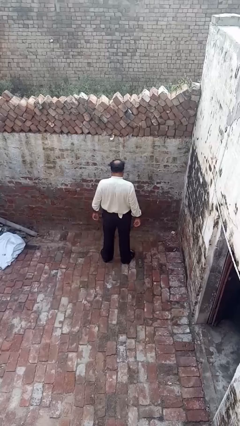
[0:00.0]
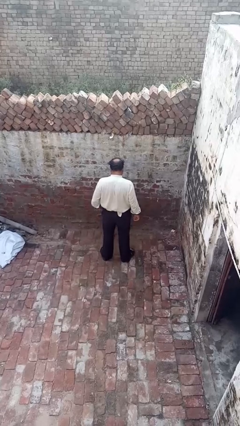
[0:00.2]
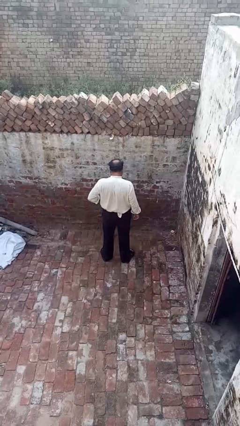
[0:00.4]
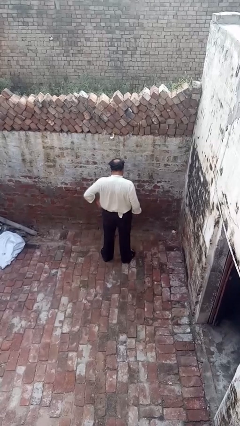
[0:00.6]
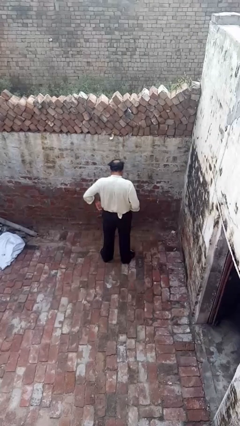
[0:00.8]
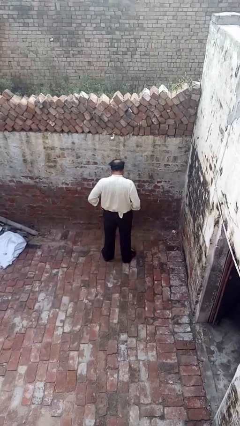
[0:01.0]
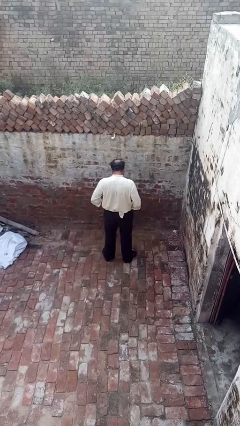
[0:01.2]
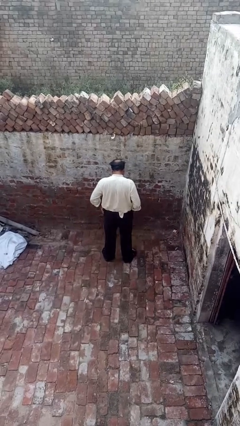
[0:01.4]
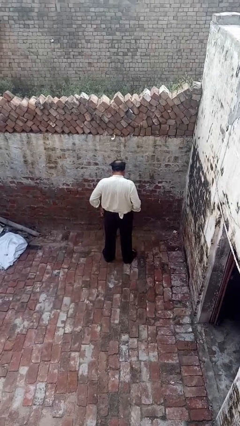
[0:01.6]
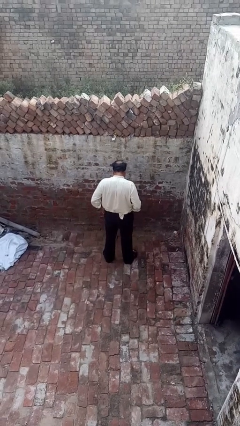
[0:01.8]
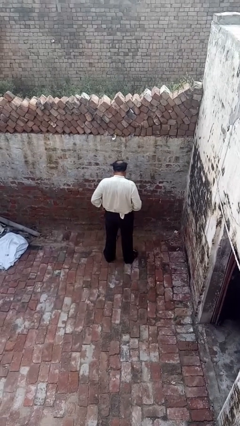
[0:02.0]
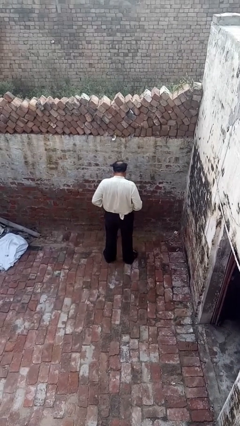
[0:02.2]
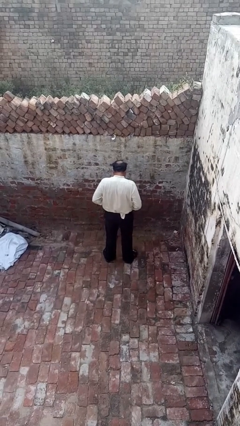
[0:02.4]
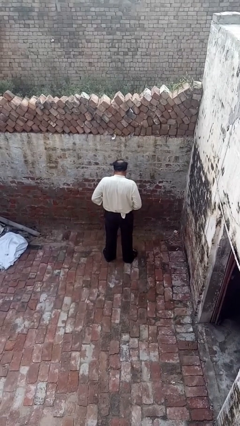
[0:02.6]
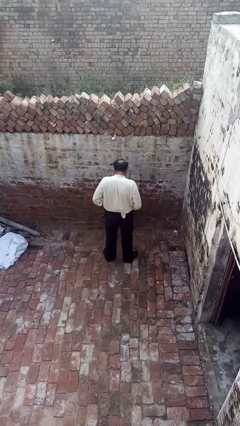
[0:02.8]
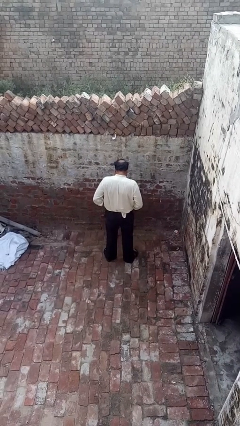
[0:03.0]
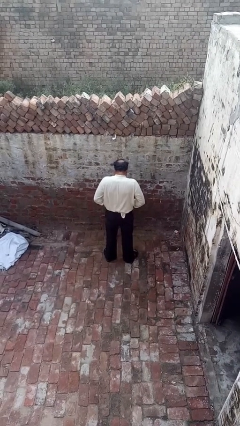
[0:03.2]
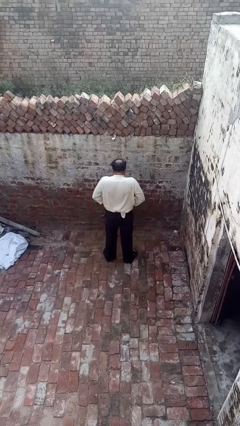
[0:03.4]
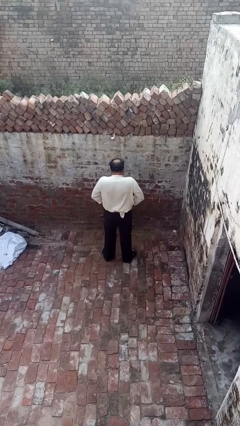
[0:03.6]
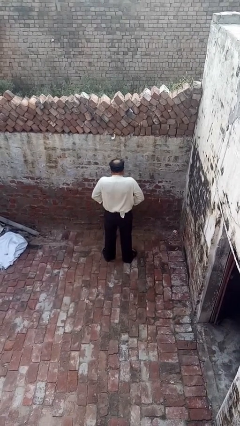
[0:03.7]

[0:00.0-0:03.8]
person hikes up pants

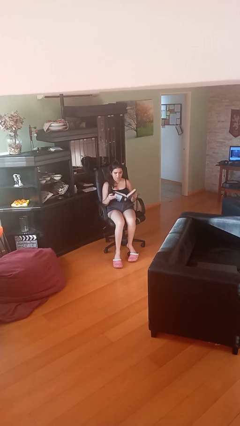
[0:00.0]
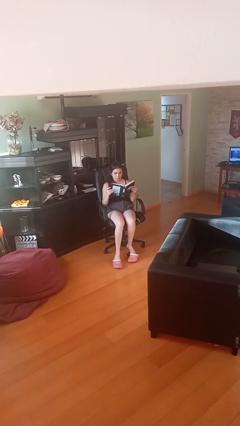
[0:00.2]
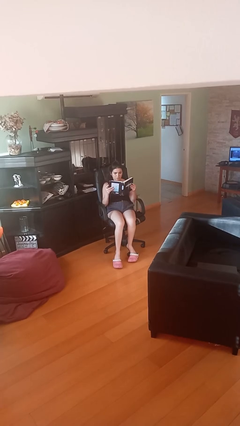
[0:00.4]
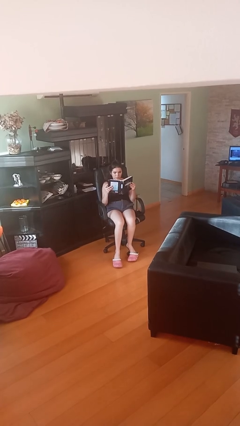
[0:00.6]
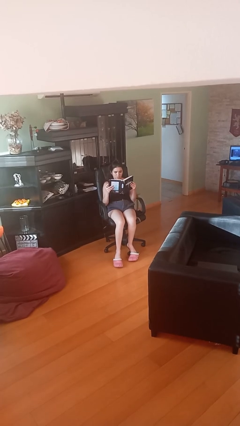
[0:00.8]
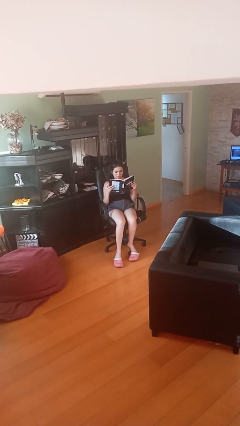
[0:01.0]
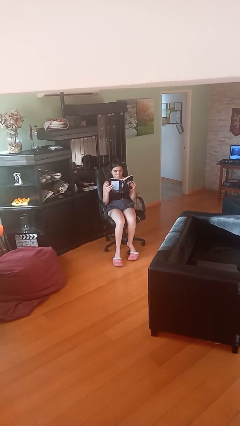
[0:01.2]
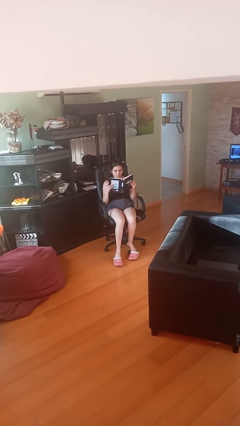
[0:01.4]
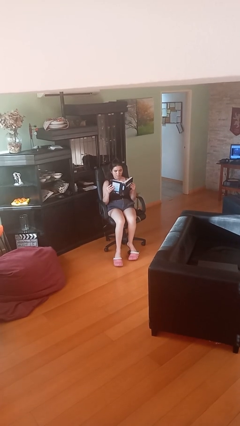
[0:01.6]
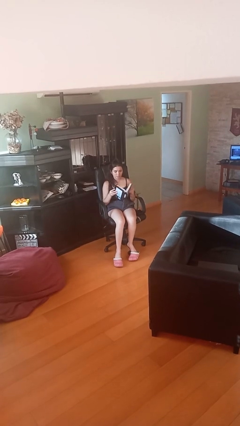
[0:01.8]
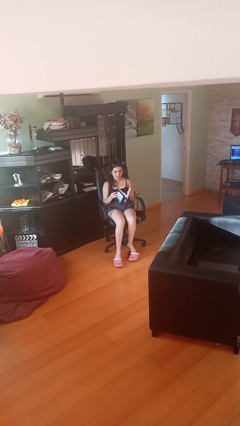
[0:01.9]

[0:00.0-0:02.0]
person reads document

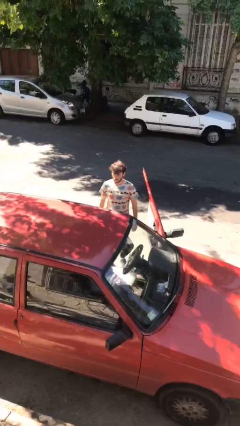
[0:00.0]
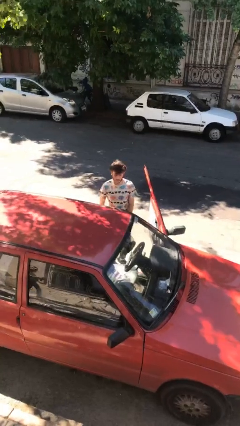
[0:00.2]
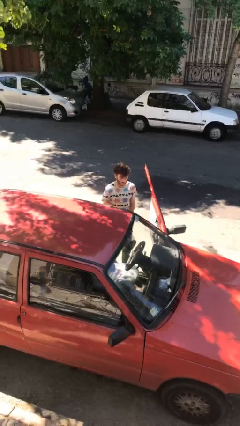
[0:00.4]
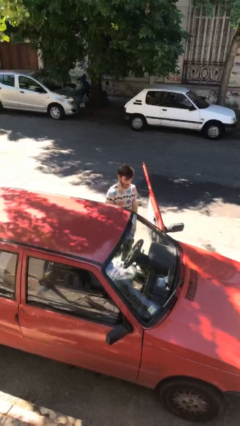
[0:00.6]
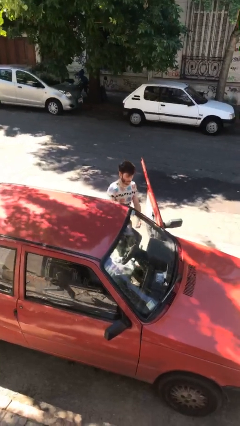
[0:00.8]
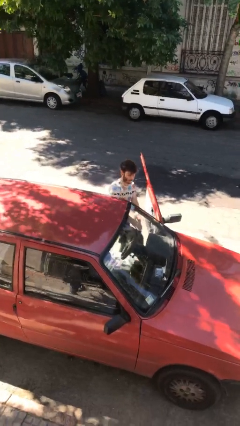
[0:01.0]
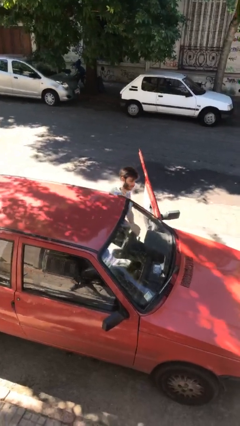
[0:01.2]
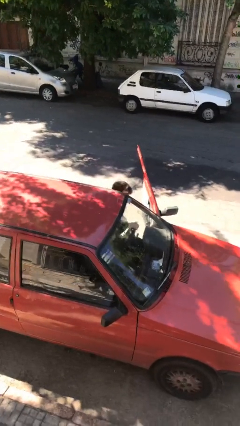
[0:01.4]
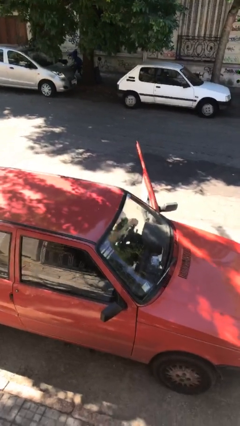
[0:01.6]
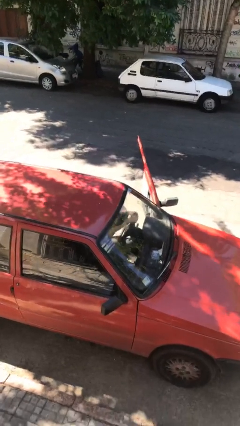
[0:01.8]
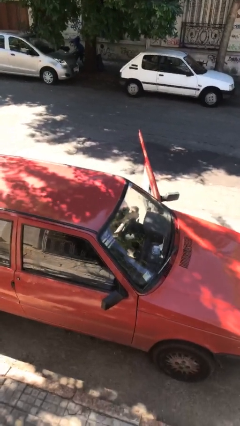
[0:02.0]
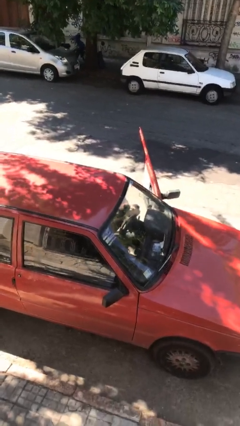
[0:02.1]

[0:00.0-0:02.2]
person enters car

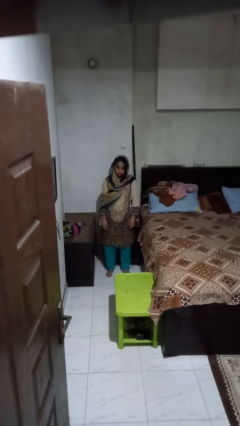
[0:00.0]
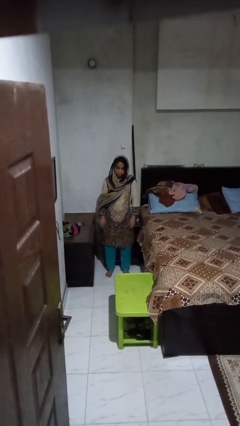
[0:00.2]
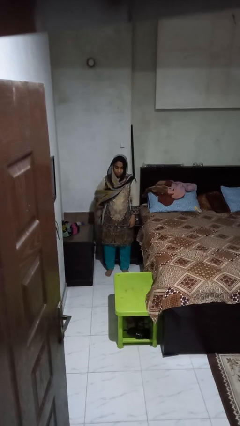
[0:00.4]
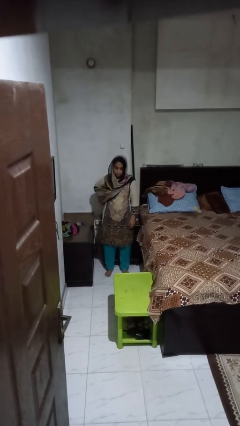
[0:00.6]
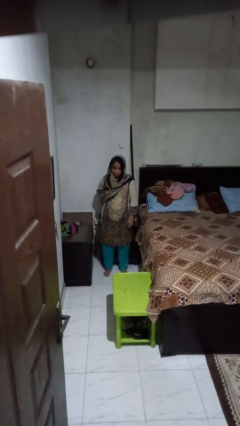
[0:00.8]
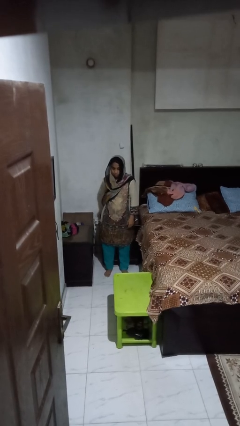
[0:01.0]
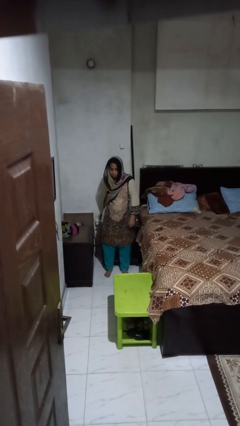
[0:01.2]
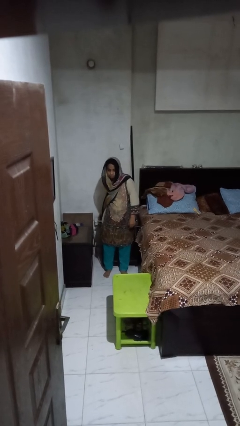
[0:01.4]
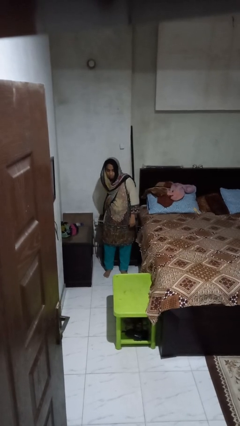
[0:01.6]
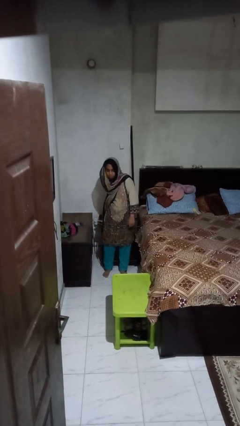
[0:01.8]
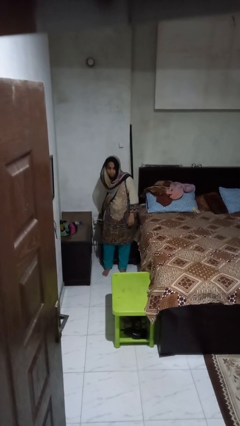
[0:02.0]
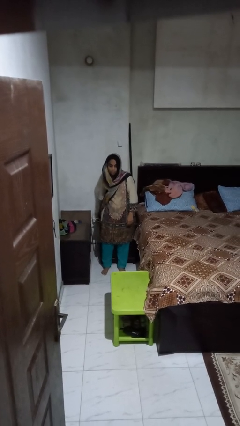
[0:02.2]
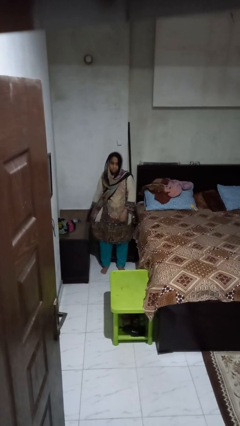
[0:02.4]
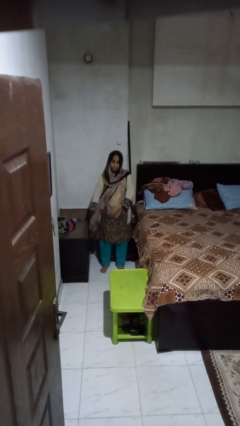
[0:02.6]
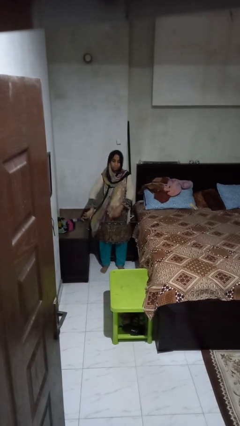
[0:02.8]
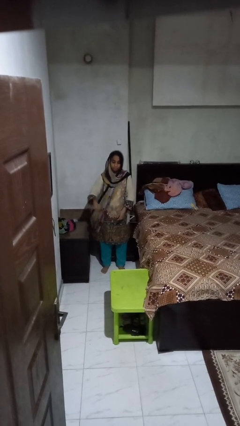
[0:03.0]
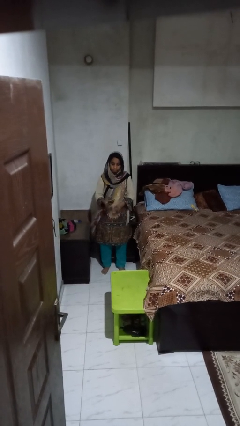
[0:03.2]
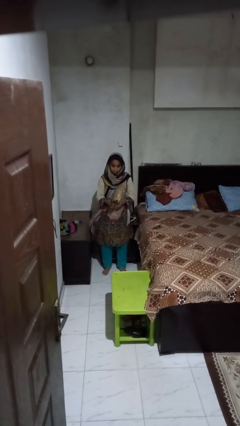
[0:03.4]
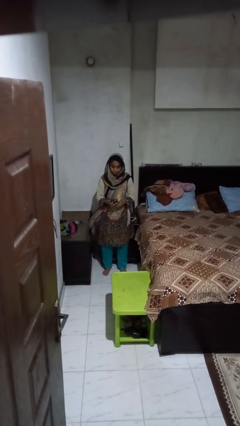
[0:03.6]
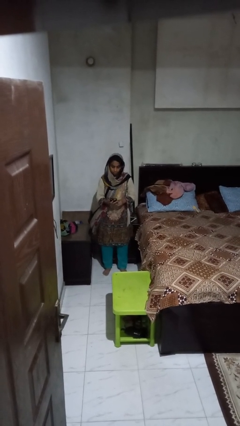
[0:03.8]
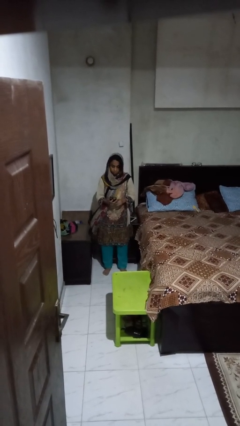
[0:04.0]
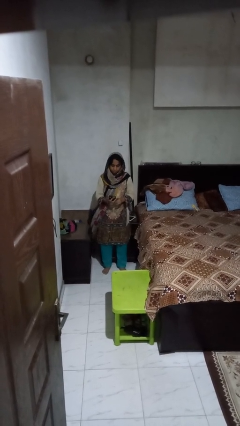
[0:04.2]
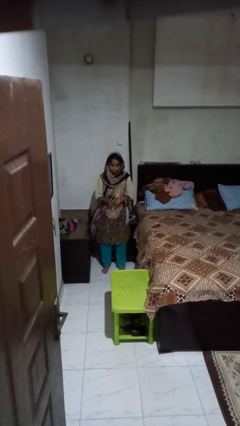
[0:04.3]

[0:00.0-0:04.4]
person takes phone from pocket

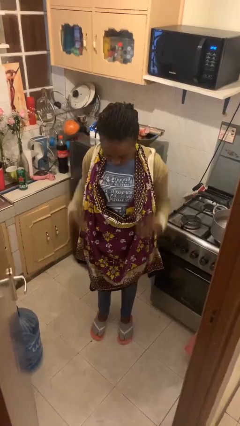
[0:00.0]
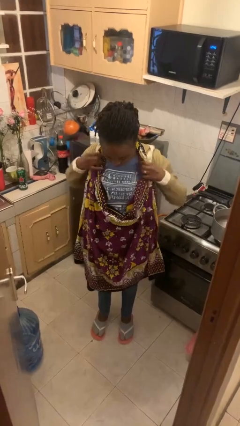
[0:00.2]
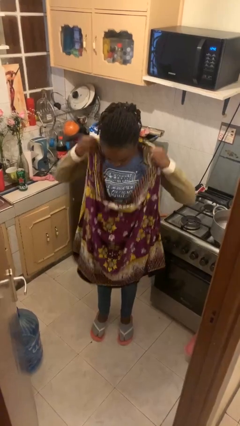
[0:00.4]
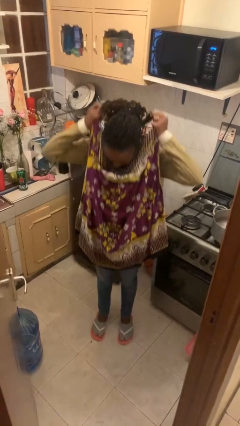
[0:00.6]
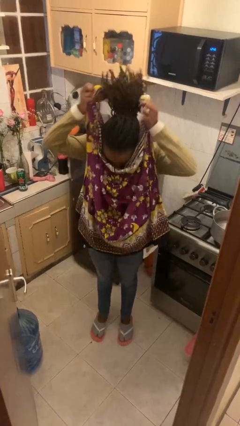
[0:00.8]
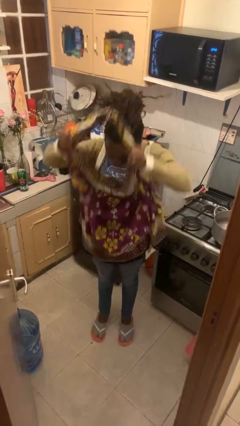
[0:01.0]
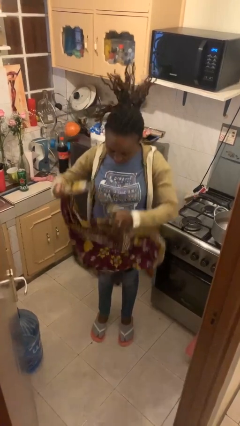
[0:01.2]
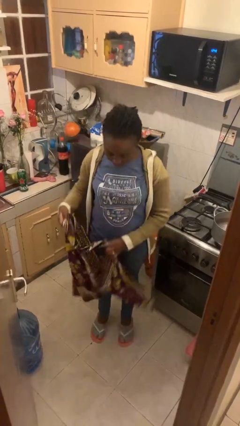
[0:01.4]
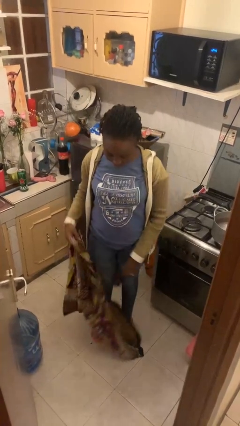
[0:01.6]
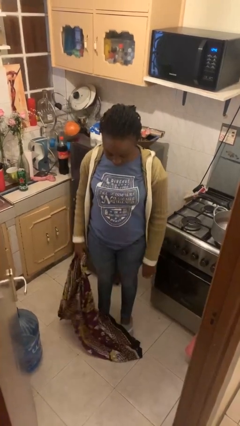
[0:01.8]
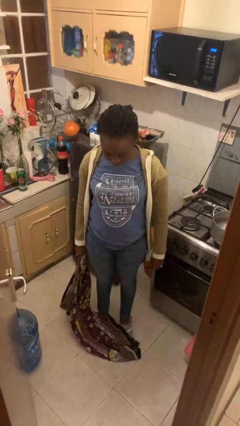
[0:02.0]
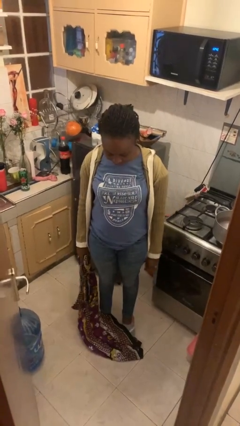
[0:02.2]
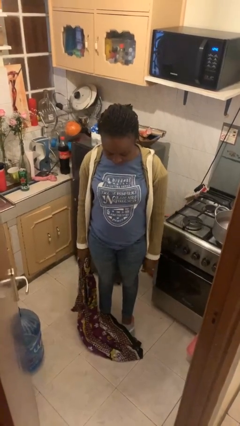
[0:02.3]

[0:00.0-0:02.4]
person takes off apron

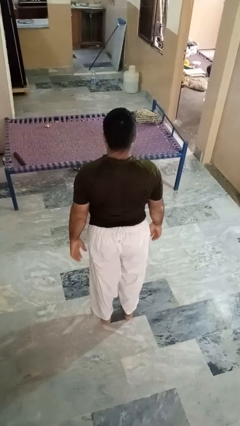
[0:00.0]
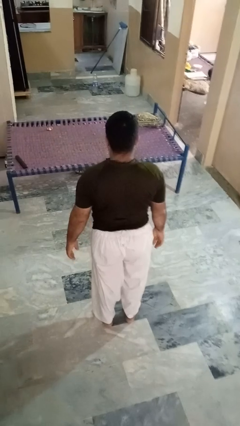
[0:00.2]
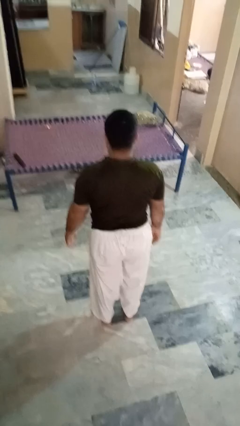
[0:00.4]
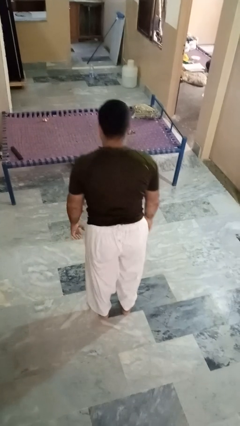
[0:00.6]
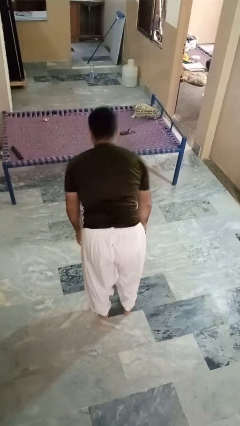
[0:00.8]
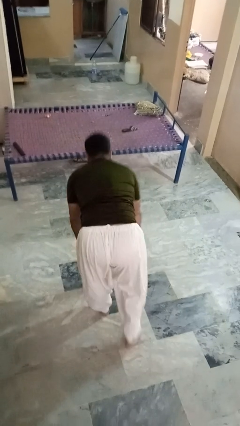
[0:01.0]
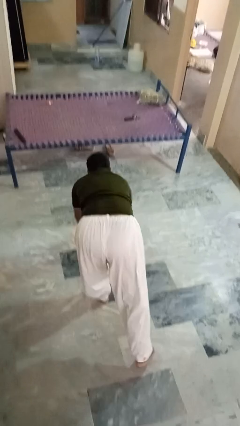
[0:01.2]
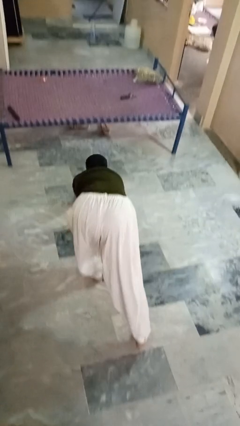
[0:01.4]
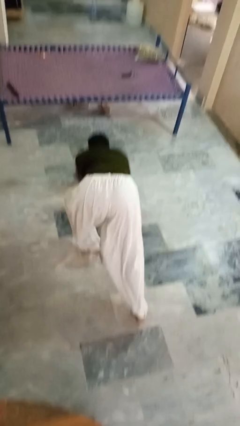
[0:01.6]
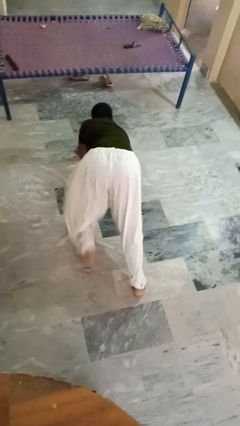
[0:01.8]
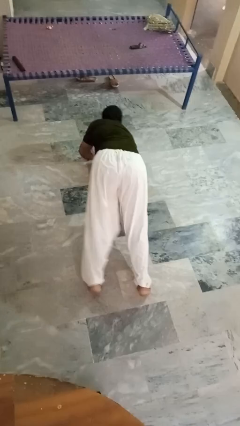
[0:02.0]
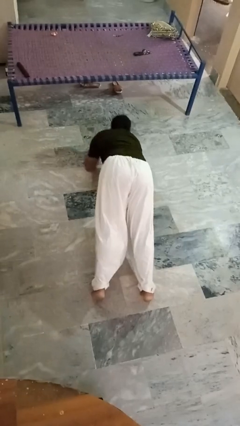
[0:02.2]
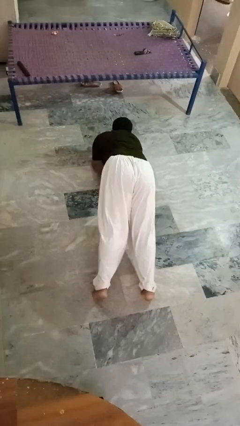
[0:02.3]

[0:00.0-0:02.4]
person exercises with plank
